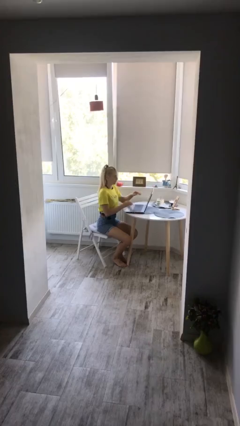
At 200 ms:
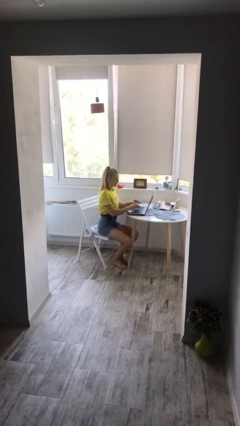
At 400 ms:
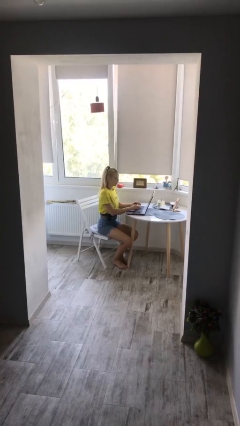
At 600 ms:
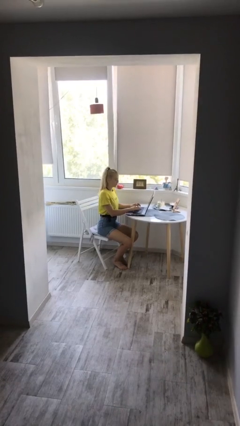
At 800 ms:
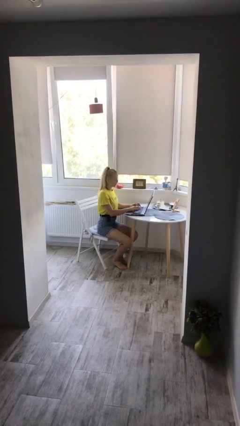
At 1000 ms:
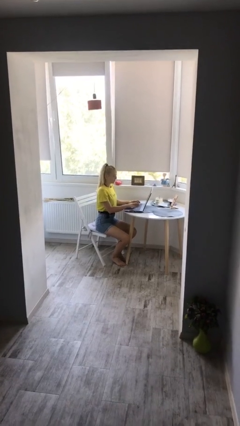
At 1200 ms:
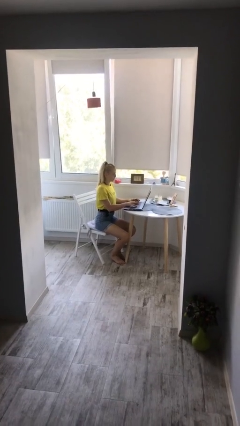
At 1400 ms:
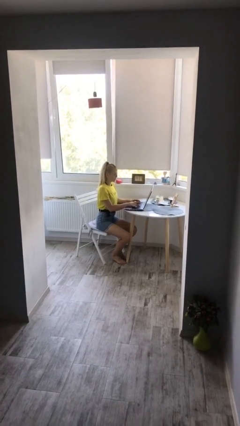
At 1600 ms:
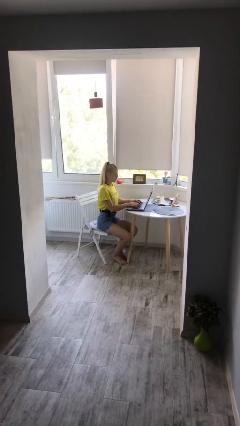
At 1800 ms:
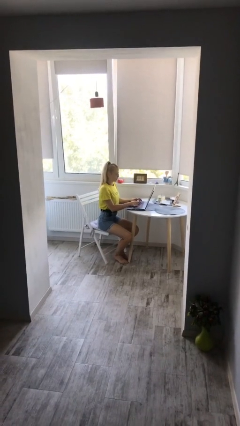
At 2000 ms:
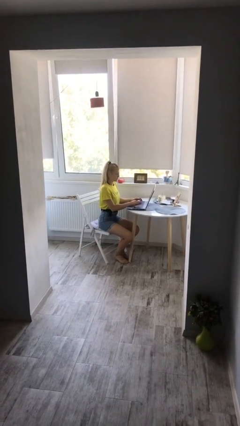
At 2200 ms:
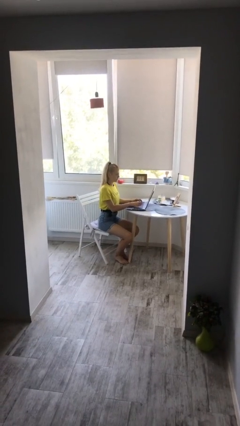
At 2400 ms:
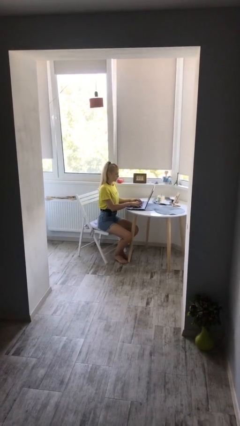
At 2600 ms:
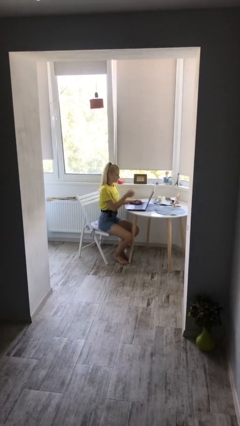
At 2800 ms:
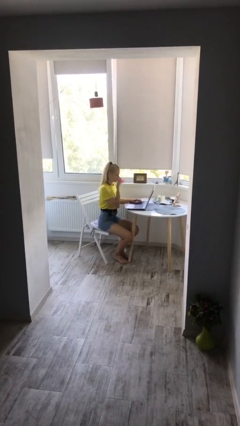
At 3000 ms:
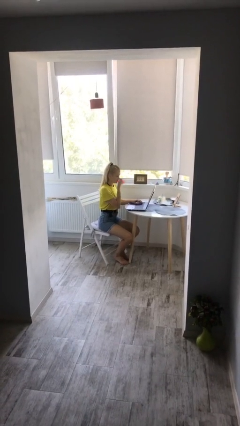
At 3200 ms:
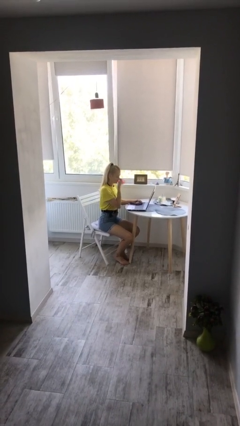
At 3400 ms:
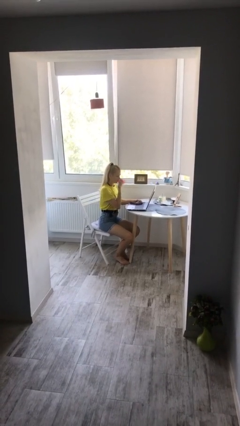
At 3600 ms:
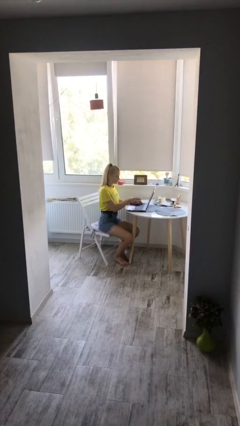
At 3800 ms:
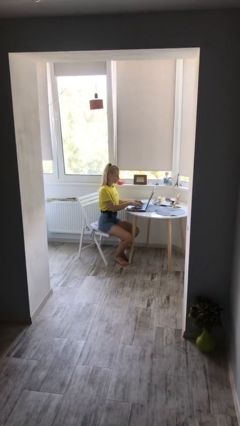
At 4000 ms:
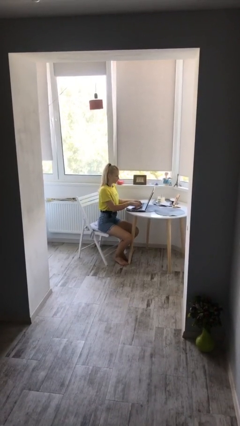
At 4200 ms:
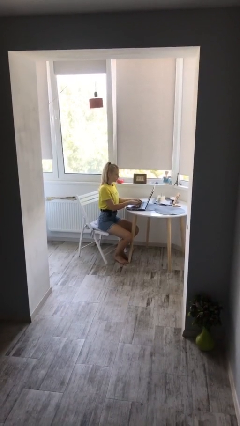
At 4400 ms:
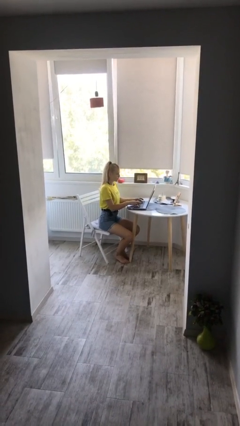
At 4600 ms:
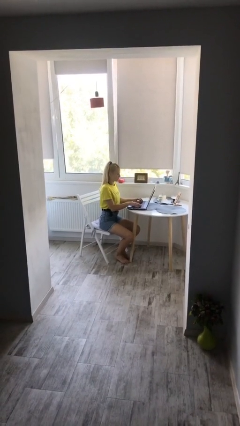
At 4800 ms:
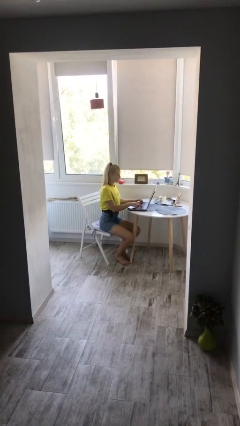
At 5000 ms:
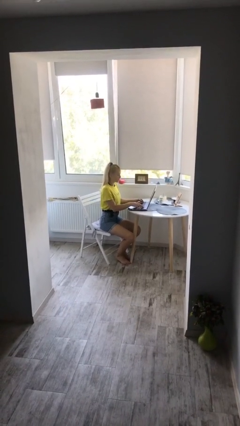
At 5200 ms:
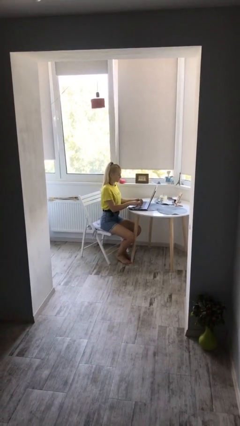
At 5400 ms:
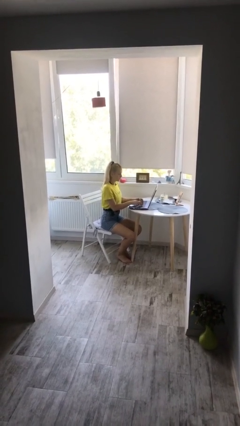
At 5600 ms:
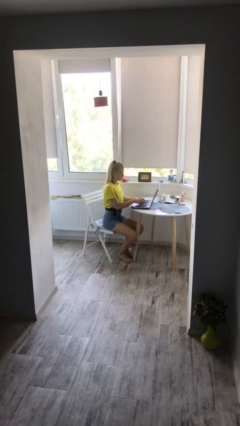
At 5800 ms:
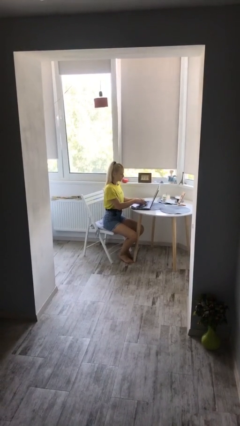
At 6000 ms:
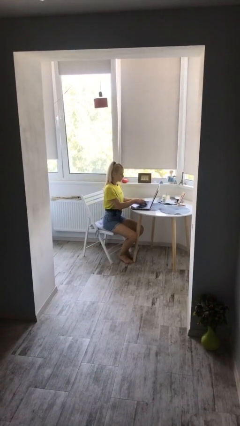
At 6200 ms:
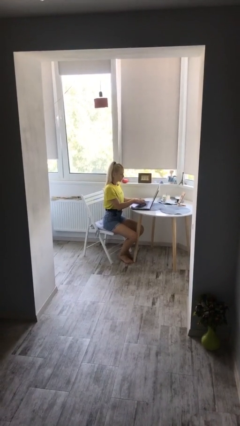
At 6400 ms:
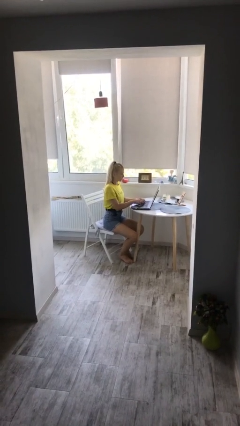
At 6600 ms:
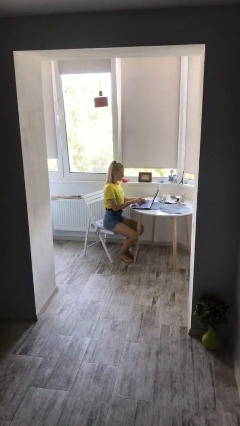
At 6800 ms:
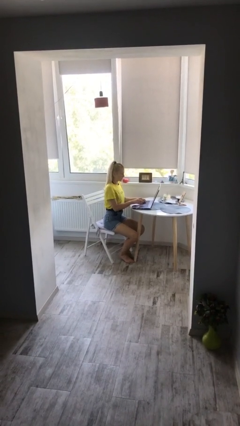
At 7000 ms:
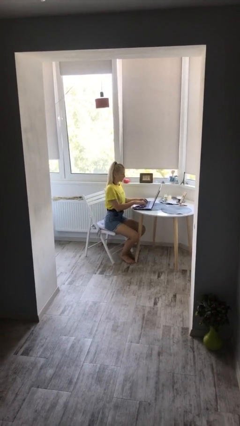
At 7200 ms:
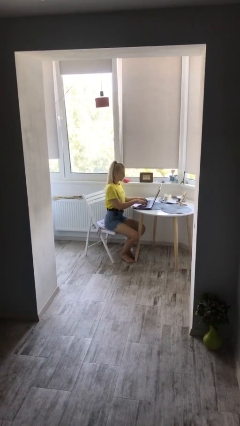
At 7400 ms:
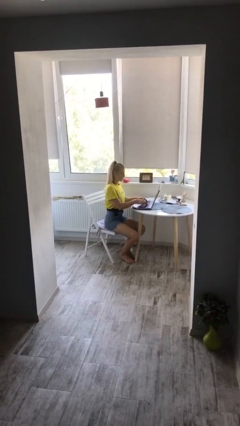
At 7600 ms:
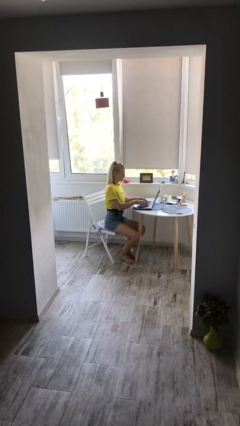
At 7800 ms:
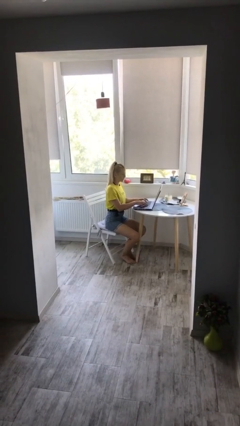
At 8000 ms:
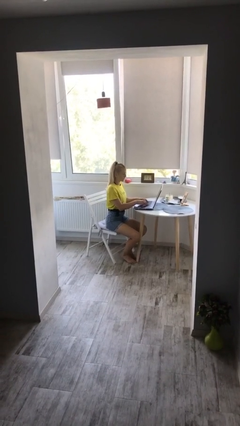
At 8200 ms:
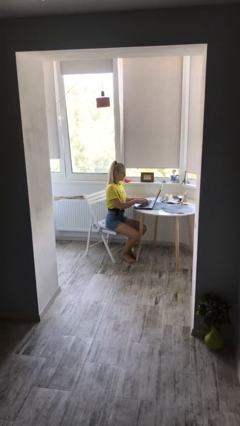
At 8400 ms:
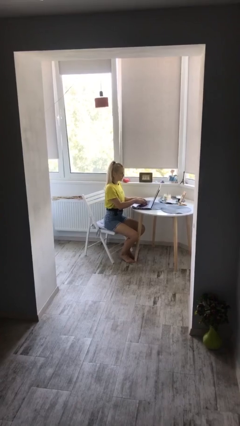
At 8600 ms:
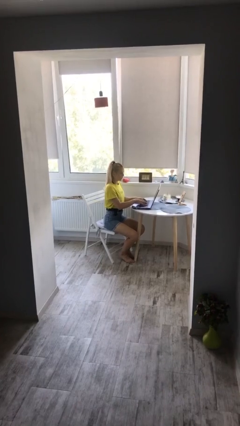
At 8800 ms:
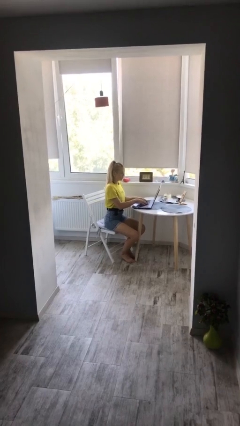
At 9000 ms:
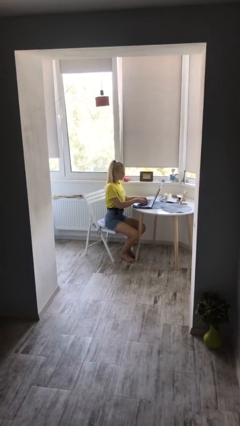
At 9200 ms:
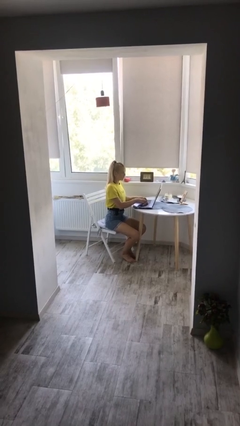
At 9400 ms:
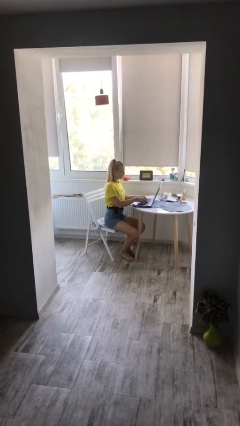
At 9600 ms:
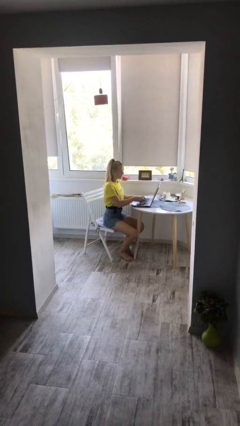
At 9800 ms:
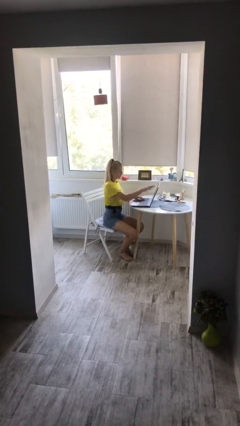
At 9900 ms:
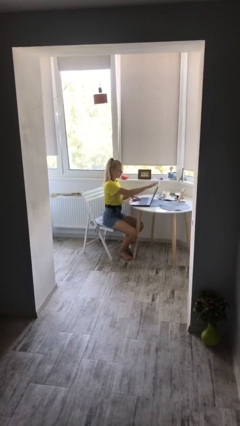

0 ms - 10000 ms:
person interacts with laptop

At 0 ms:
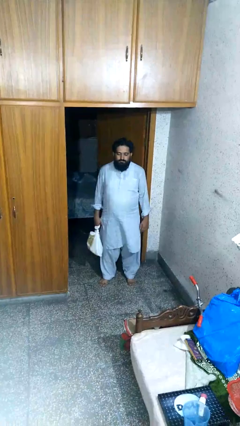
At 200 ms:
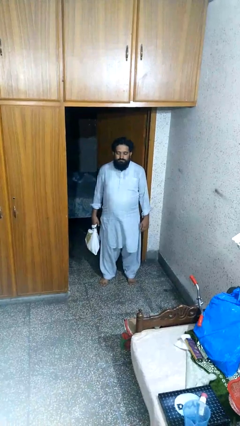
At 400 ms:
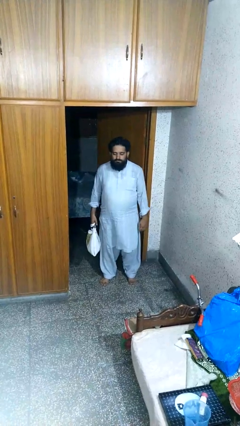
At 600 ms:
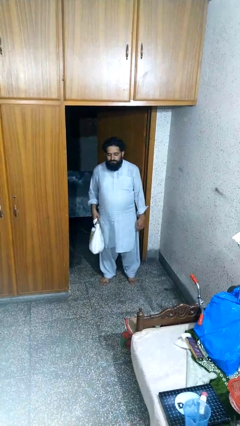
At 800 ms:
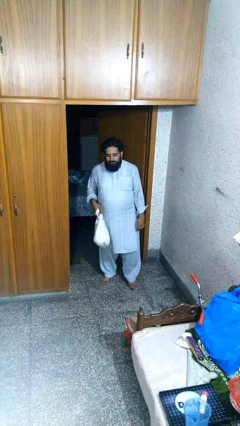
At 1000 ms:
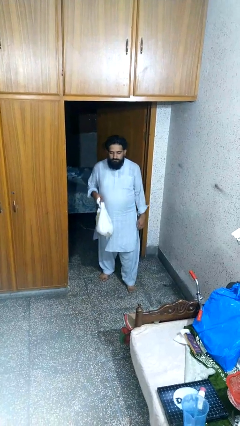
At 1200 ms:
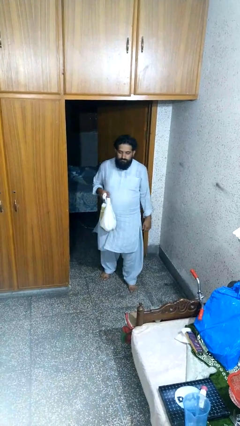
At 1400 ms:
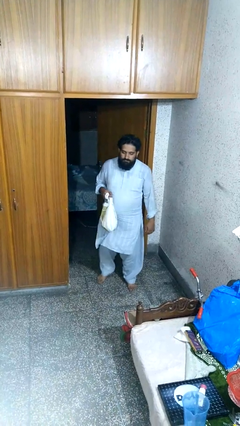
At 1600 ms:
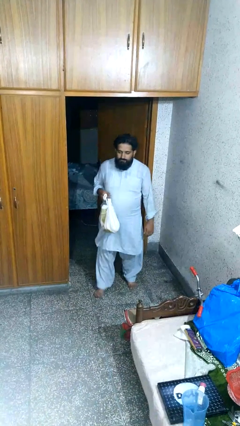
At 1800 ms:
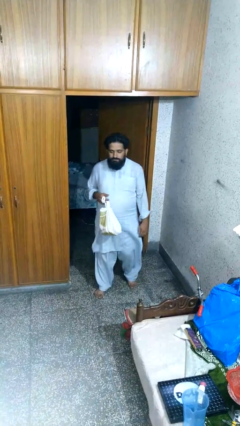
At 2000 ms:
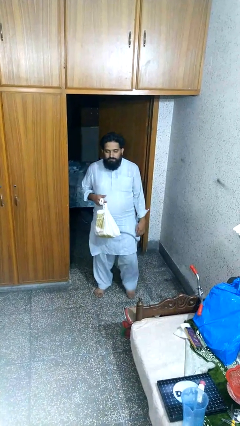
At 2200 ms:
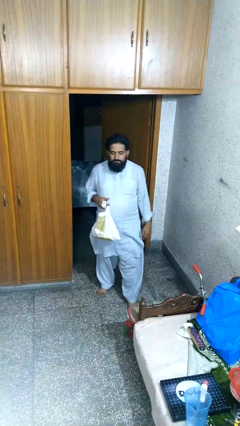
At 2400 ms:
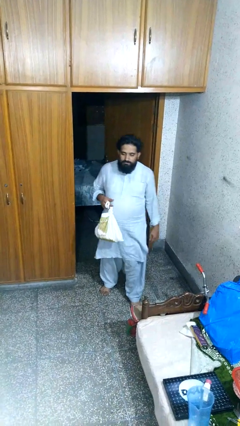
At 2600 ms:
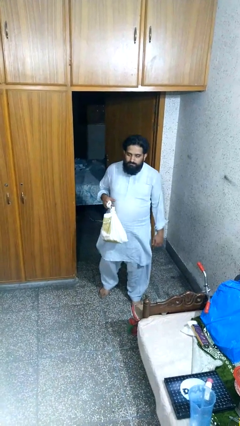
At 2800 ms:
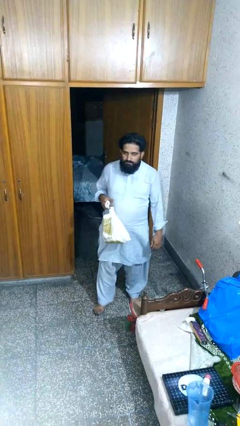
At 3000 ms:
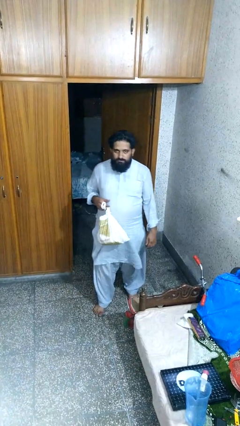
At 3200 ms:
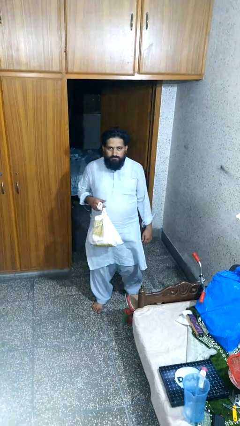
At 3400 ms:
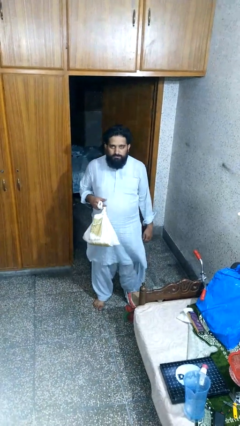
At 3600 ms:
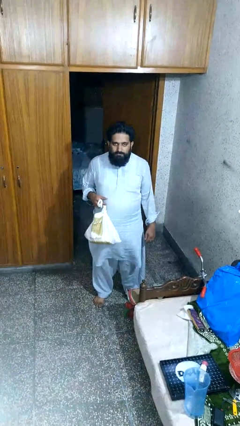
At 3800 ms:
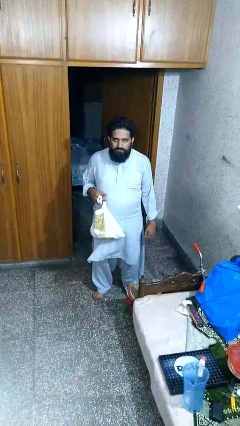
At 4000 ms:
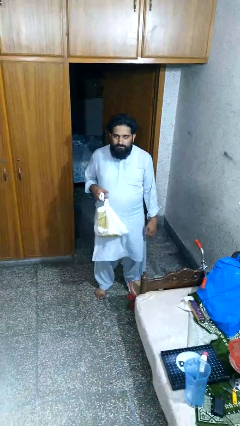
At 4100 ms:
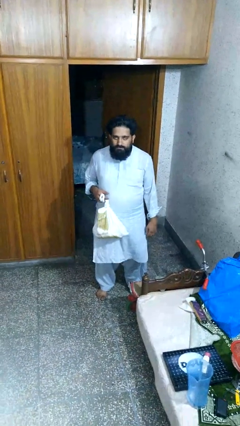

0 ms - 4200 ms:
person carries groceries

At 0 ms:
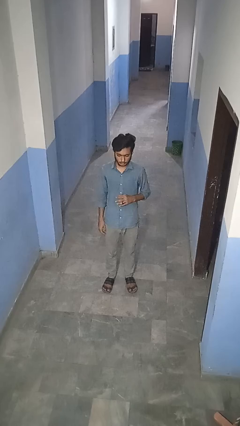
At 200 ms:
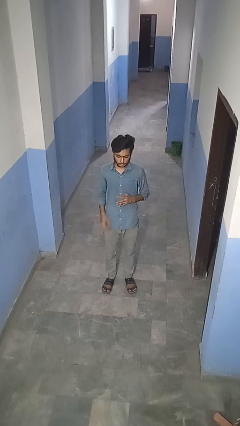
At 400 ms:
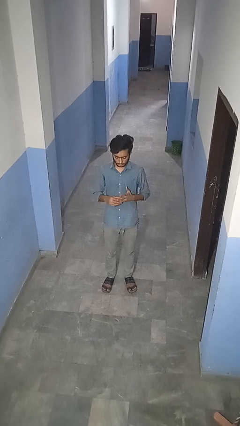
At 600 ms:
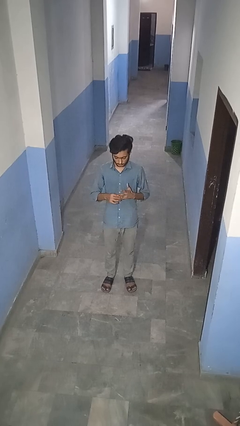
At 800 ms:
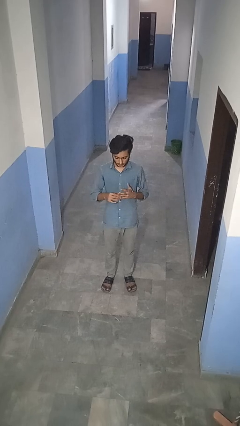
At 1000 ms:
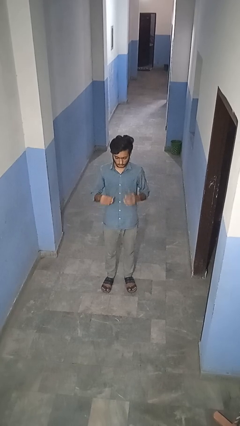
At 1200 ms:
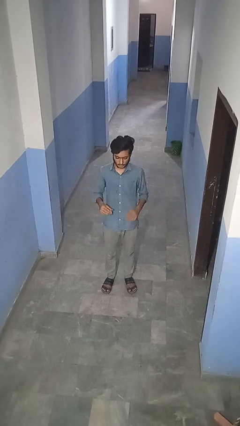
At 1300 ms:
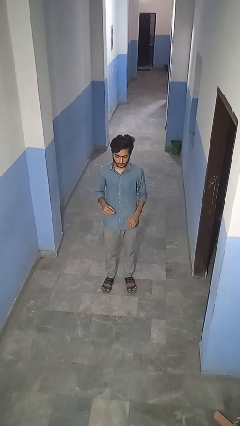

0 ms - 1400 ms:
person takes off ring

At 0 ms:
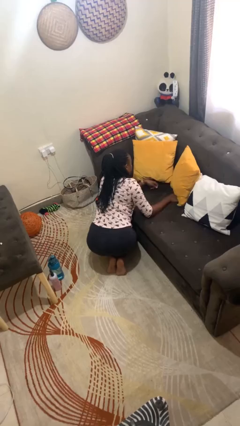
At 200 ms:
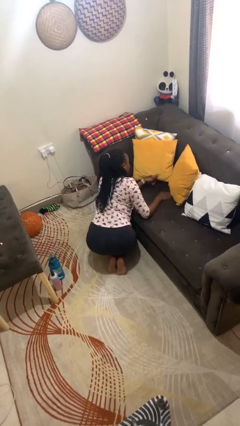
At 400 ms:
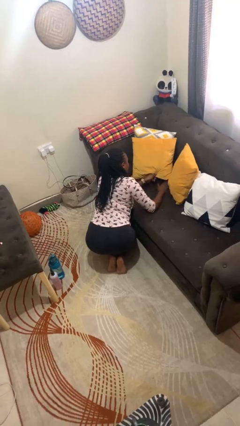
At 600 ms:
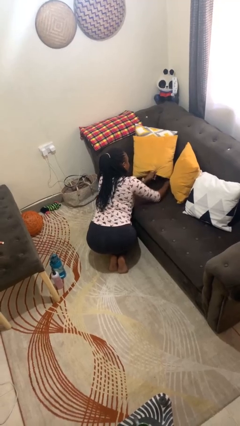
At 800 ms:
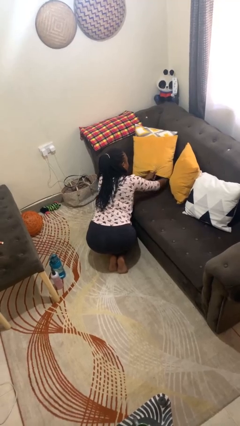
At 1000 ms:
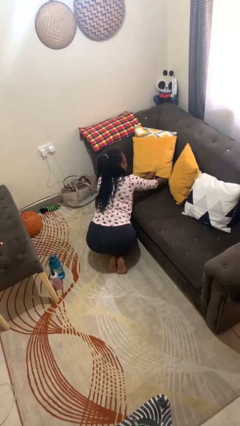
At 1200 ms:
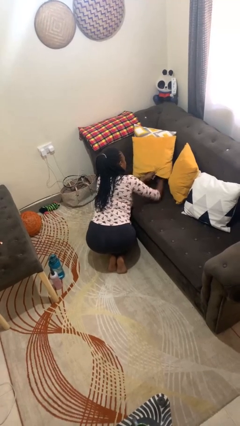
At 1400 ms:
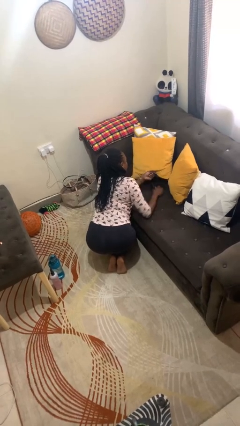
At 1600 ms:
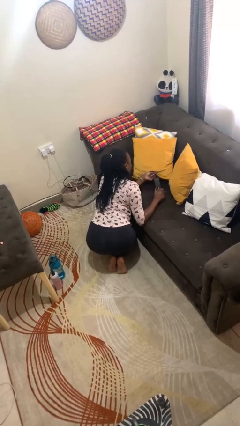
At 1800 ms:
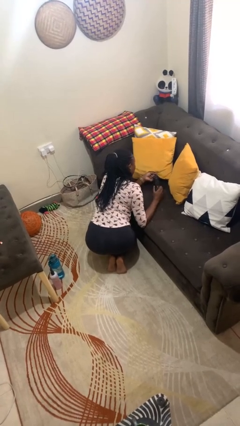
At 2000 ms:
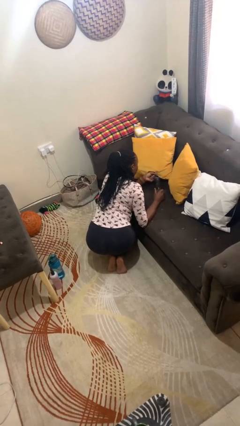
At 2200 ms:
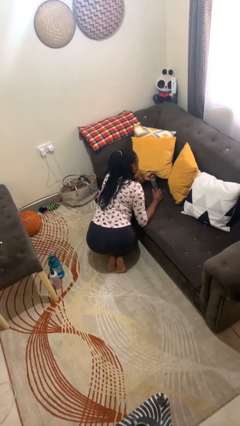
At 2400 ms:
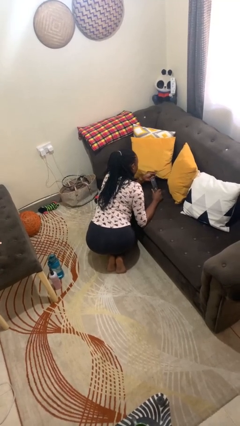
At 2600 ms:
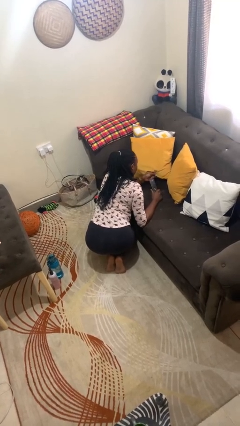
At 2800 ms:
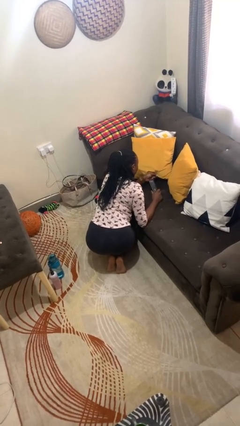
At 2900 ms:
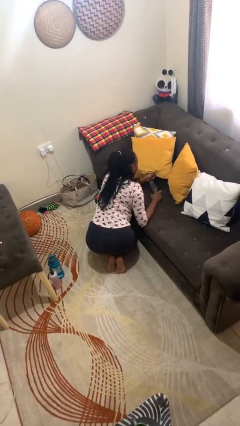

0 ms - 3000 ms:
person searches in couch
